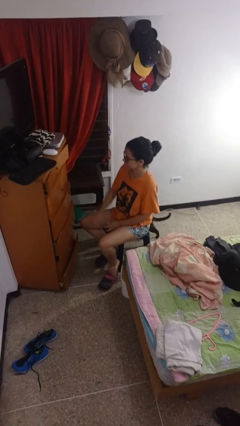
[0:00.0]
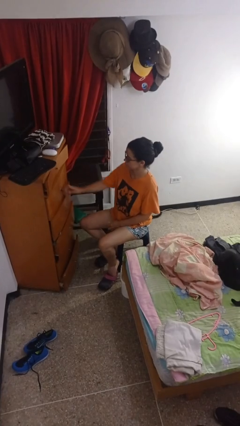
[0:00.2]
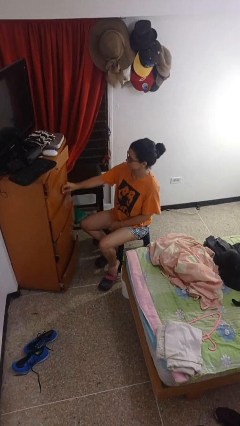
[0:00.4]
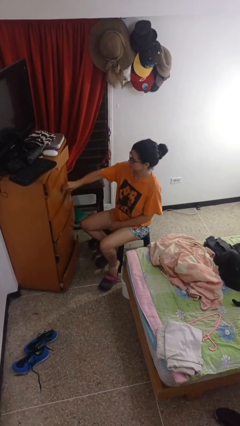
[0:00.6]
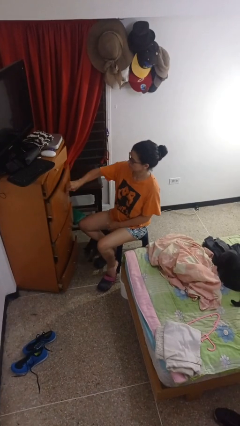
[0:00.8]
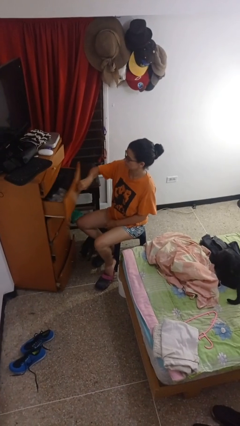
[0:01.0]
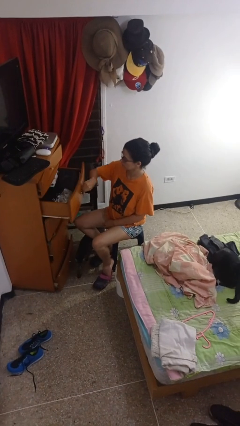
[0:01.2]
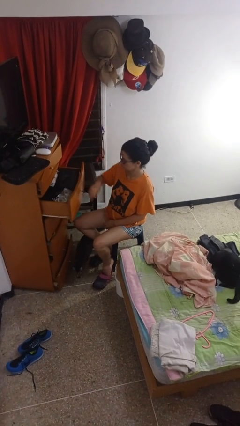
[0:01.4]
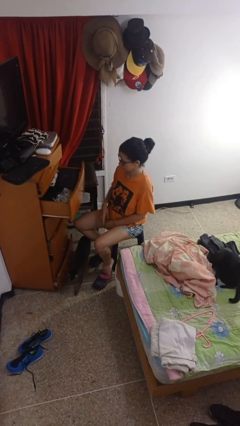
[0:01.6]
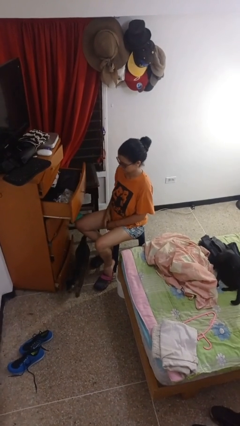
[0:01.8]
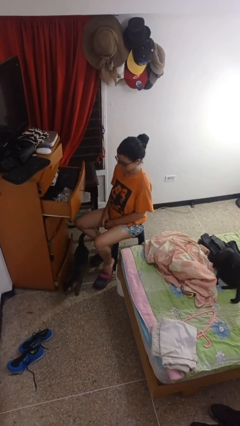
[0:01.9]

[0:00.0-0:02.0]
person opens dresser drawer

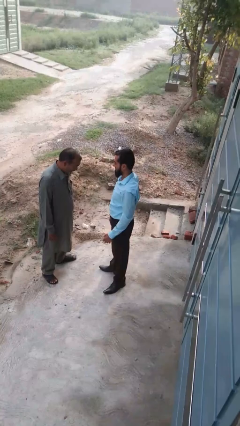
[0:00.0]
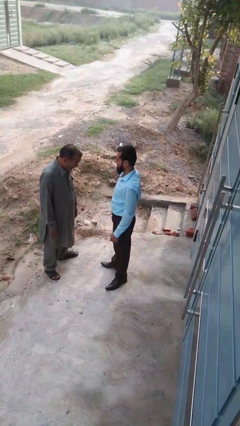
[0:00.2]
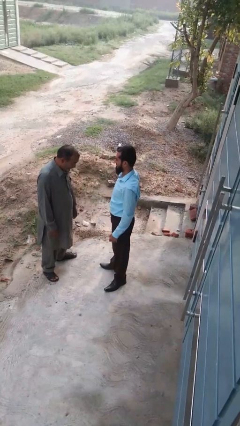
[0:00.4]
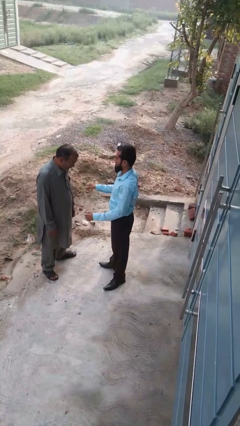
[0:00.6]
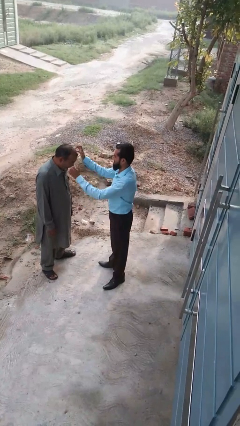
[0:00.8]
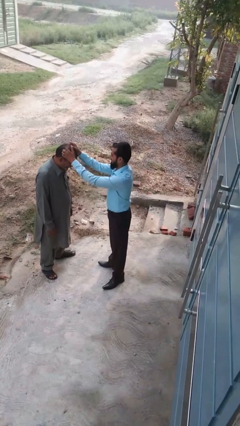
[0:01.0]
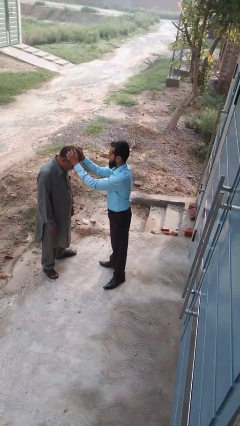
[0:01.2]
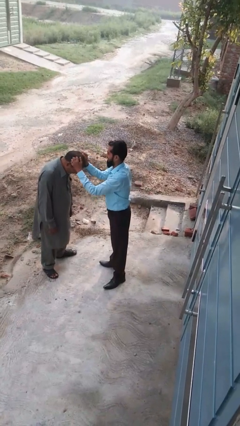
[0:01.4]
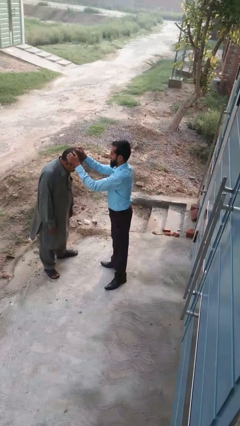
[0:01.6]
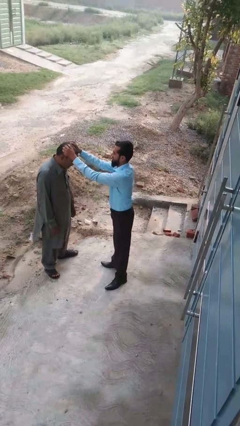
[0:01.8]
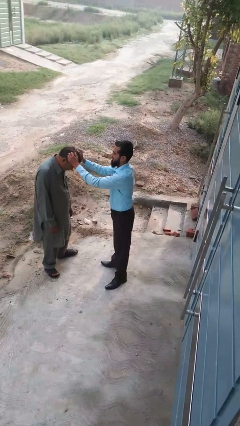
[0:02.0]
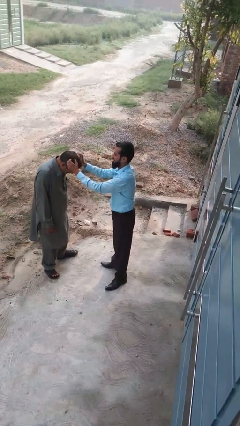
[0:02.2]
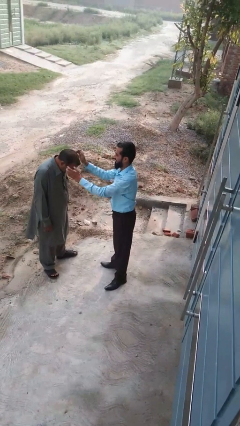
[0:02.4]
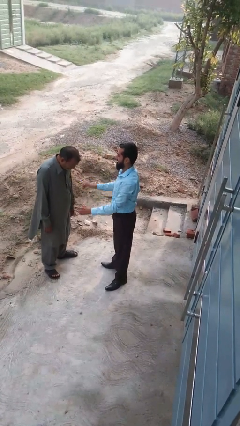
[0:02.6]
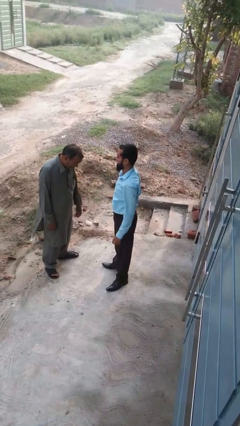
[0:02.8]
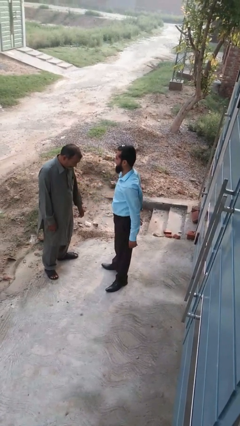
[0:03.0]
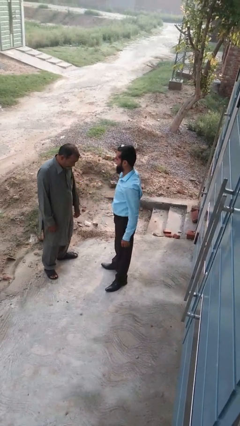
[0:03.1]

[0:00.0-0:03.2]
person grabs person by hair

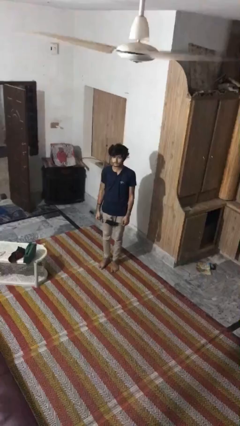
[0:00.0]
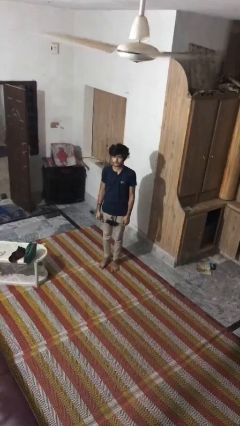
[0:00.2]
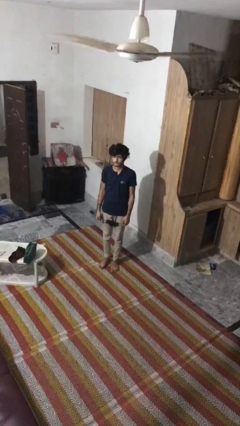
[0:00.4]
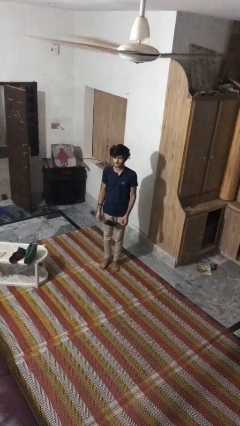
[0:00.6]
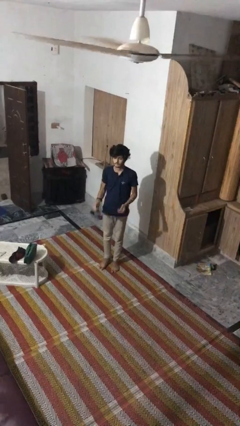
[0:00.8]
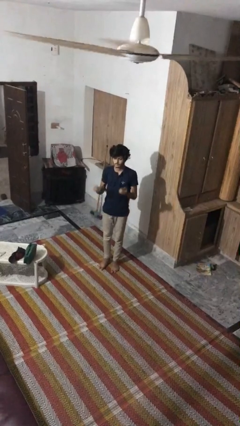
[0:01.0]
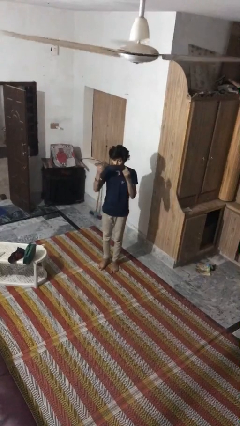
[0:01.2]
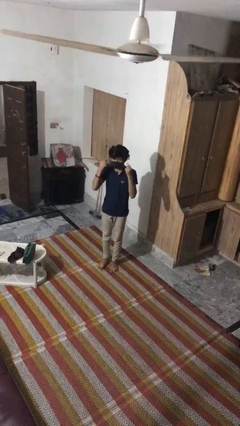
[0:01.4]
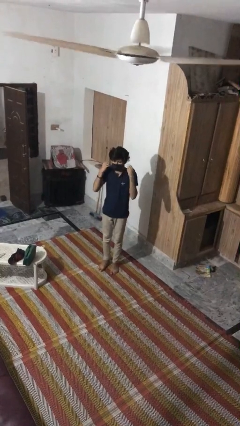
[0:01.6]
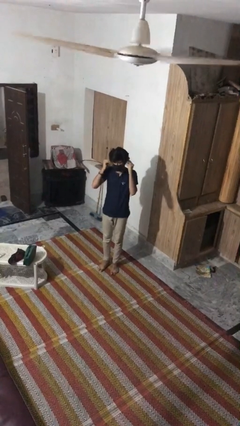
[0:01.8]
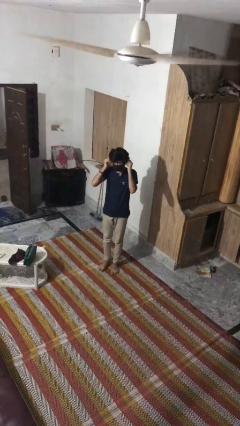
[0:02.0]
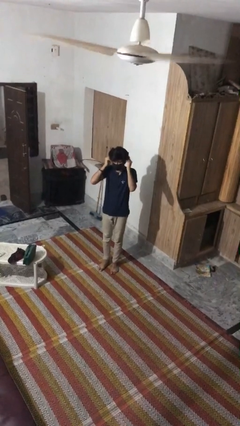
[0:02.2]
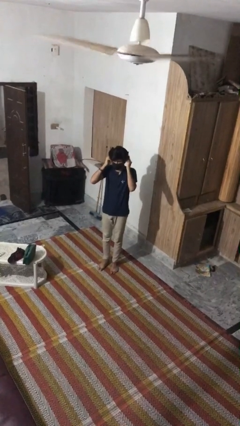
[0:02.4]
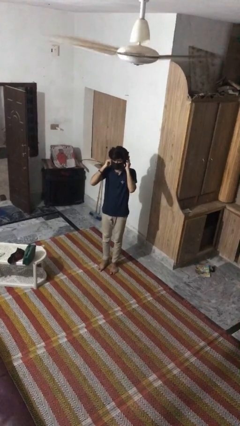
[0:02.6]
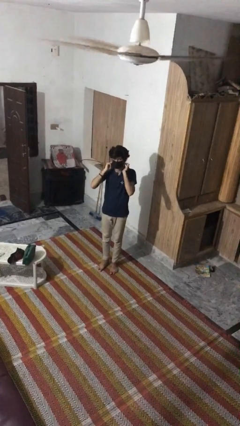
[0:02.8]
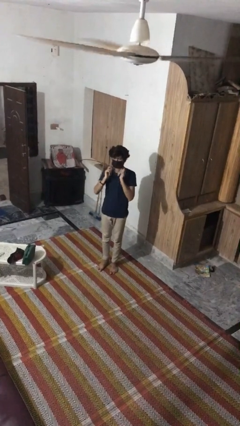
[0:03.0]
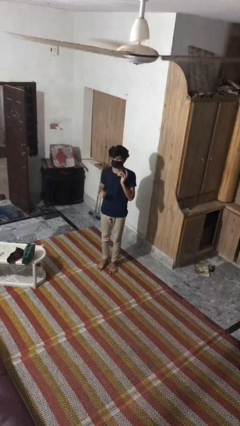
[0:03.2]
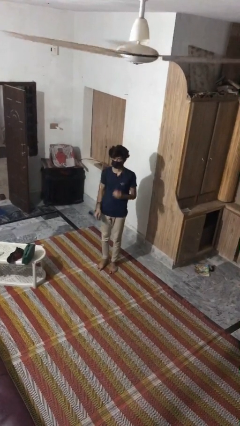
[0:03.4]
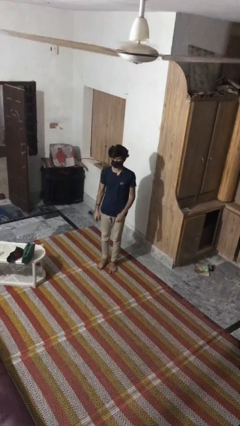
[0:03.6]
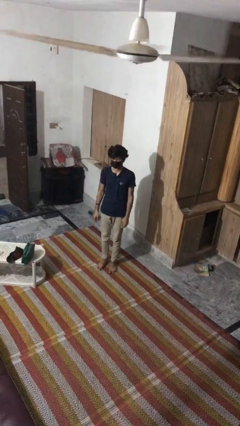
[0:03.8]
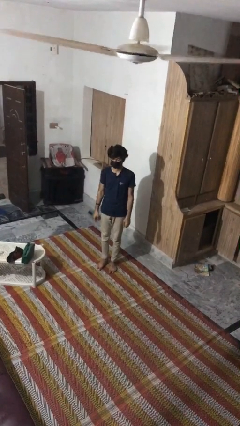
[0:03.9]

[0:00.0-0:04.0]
person puts on facemask

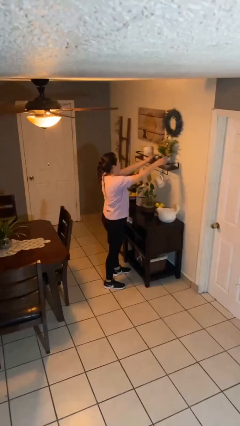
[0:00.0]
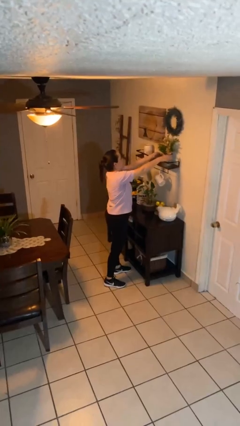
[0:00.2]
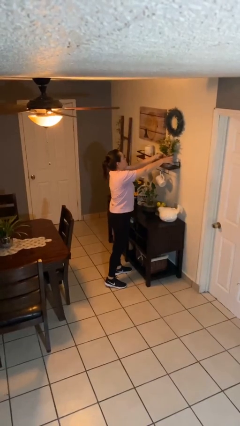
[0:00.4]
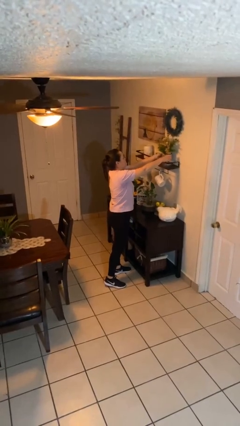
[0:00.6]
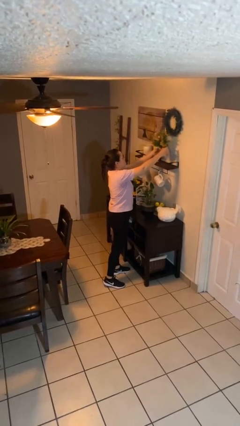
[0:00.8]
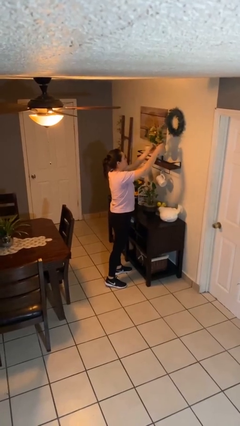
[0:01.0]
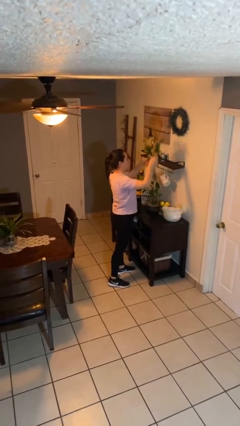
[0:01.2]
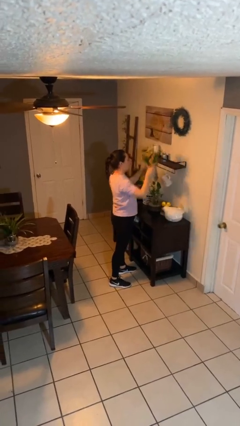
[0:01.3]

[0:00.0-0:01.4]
person picks up object from countertop

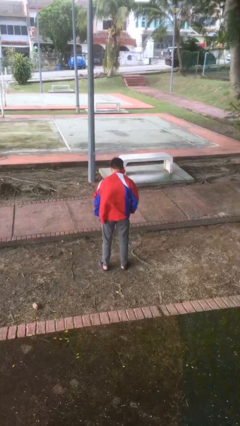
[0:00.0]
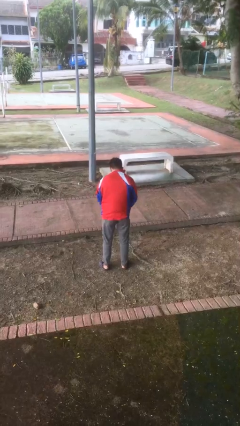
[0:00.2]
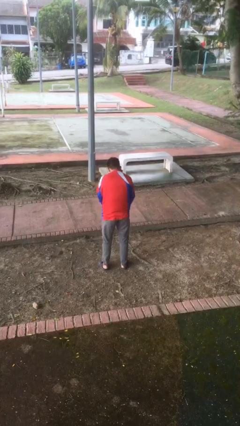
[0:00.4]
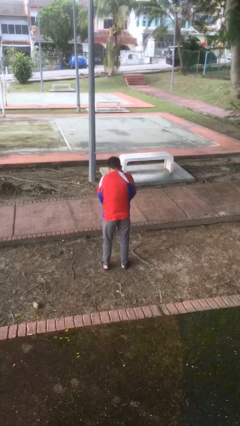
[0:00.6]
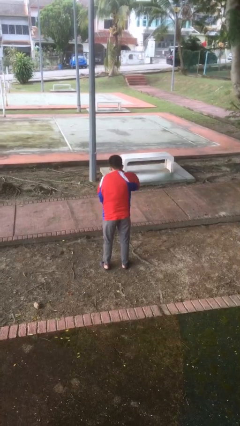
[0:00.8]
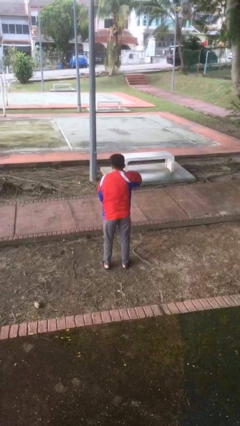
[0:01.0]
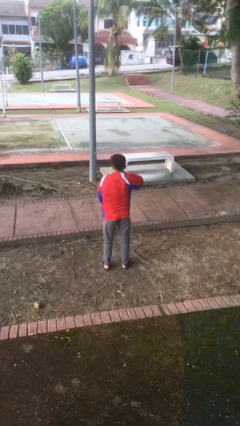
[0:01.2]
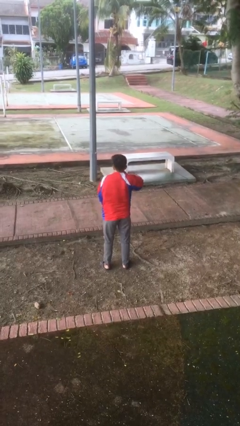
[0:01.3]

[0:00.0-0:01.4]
person zips up jacket

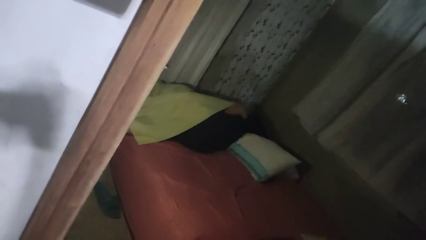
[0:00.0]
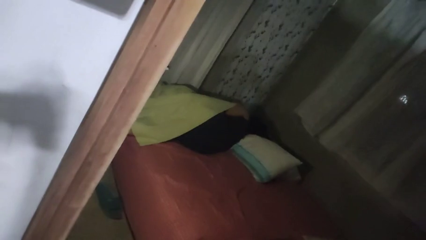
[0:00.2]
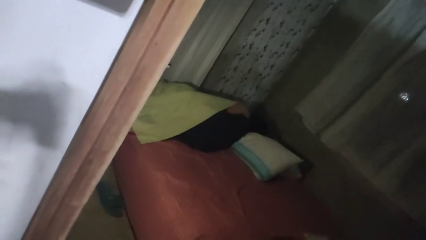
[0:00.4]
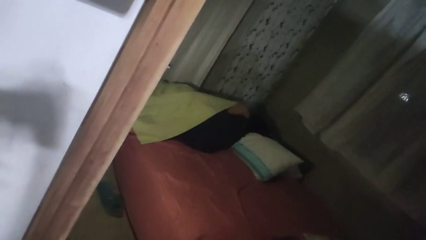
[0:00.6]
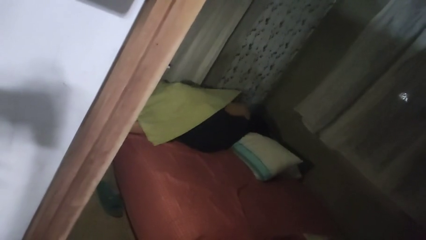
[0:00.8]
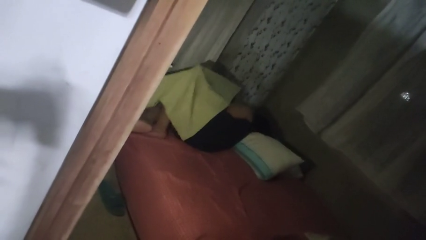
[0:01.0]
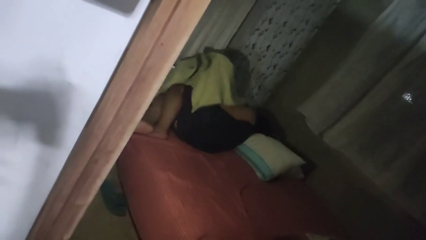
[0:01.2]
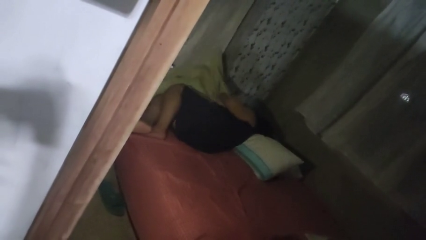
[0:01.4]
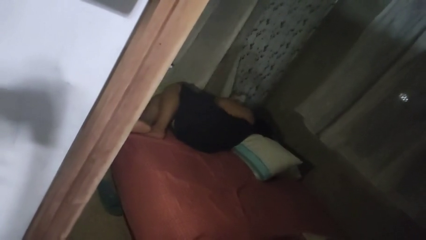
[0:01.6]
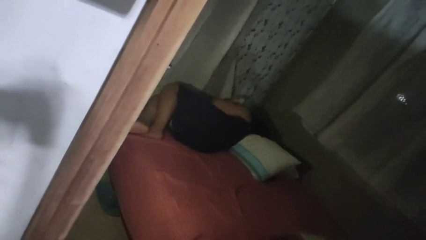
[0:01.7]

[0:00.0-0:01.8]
person uncovers with bedsheets

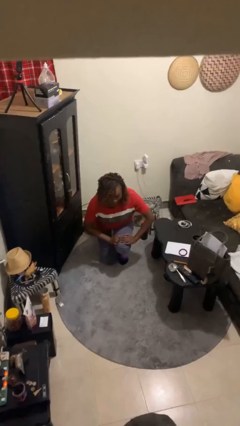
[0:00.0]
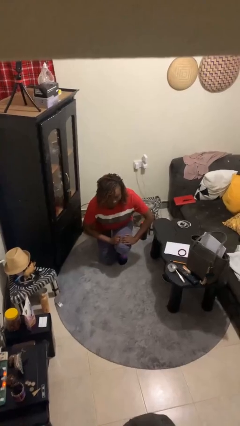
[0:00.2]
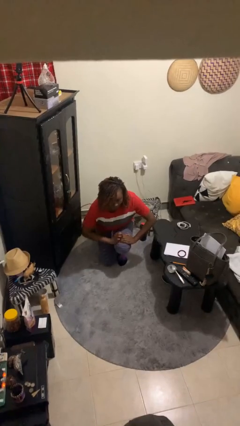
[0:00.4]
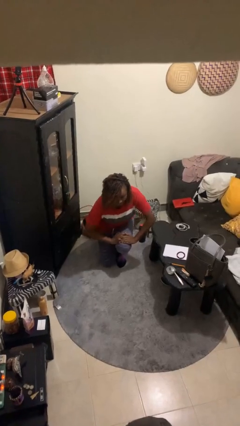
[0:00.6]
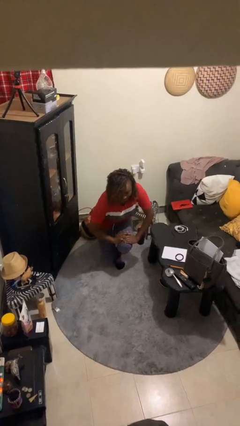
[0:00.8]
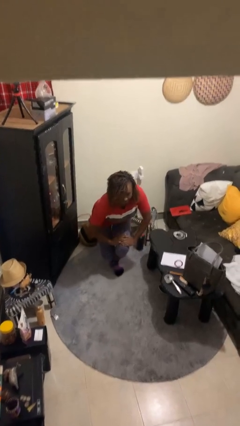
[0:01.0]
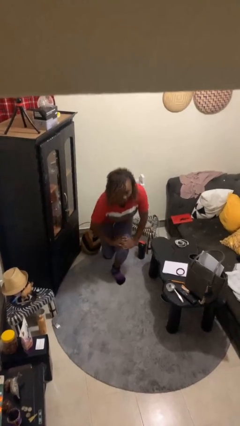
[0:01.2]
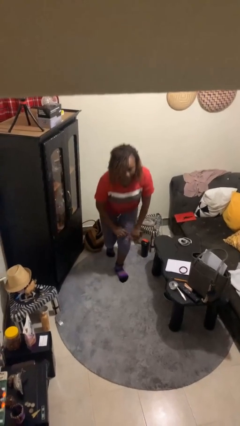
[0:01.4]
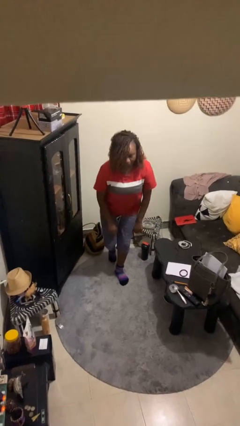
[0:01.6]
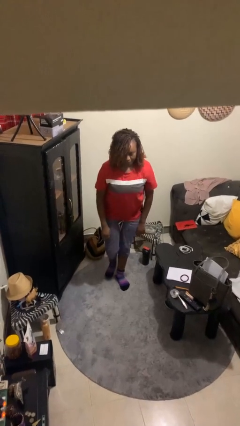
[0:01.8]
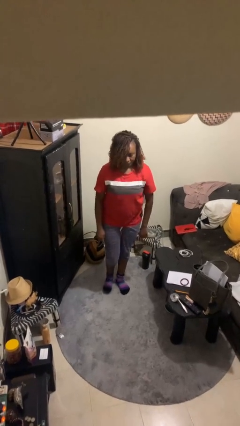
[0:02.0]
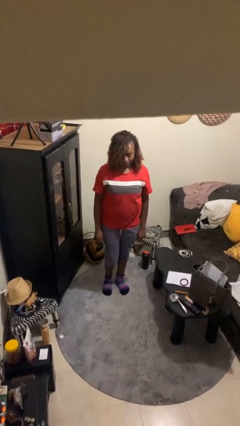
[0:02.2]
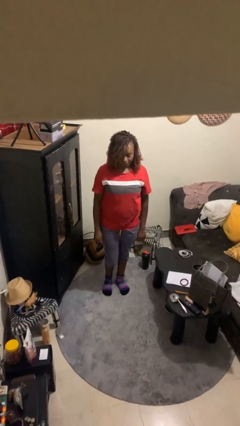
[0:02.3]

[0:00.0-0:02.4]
person stands up from floor

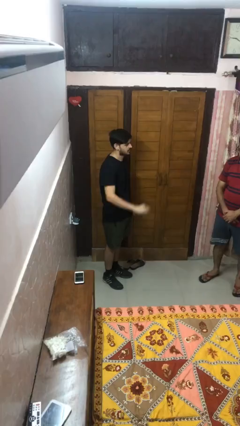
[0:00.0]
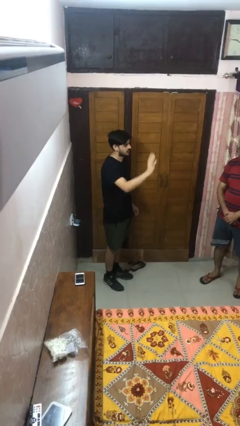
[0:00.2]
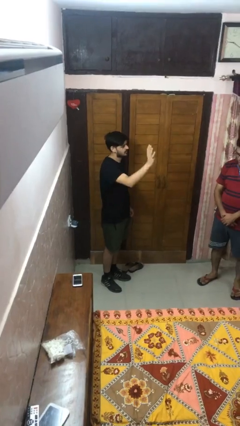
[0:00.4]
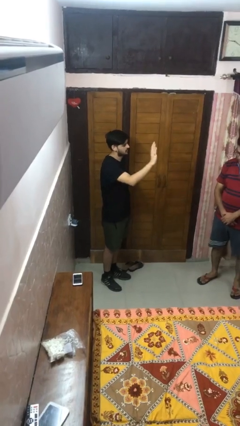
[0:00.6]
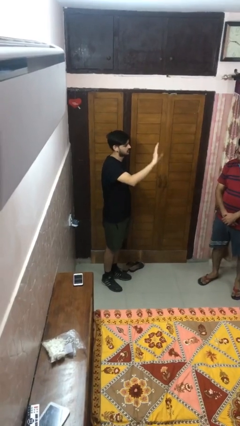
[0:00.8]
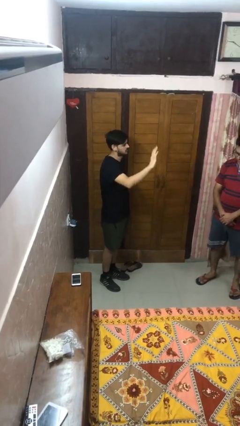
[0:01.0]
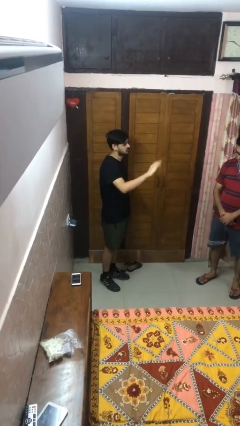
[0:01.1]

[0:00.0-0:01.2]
person waves at person
